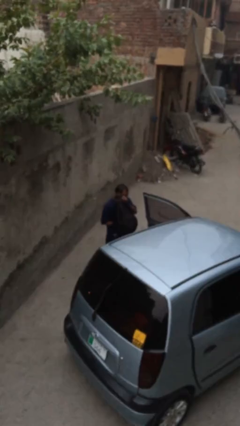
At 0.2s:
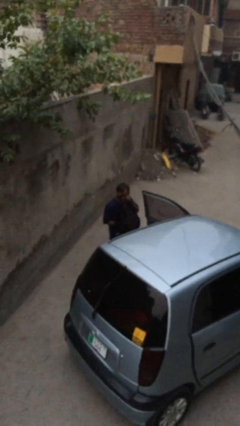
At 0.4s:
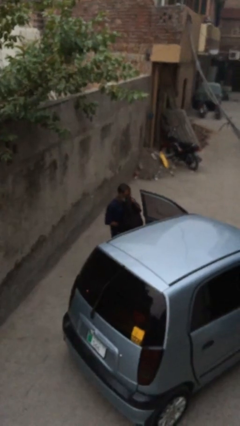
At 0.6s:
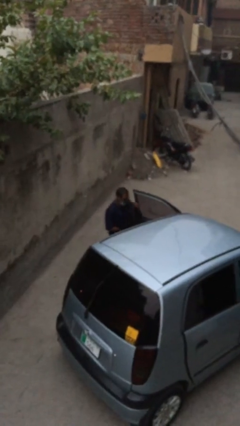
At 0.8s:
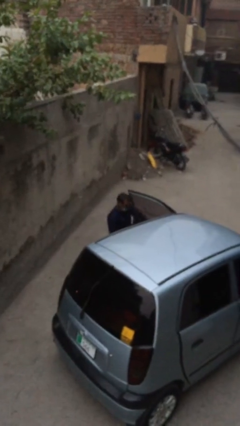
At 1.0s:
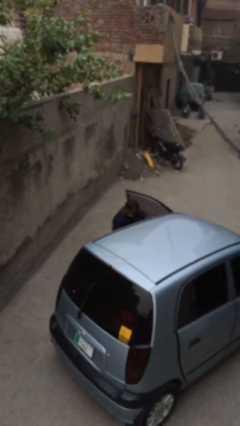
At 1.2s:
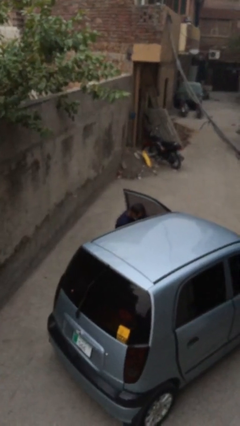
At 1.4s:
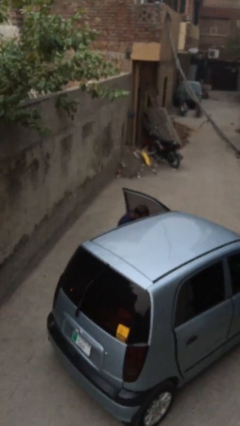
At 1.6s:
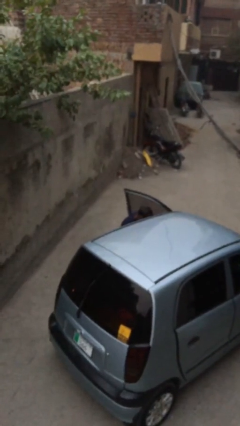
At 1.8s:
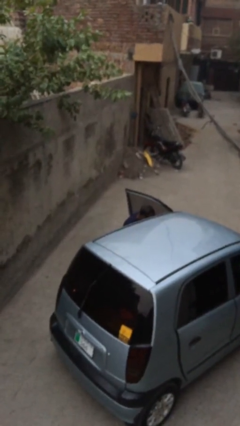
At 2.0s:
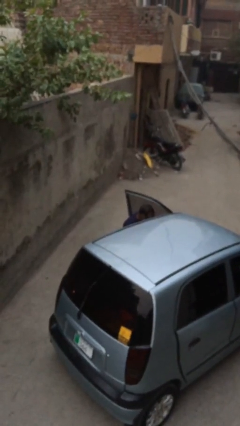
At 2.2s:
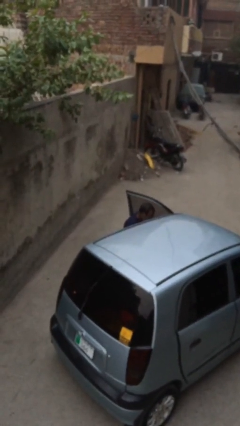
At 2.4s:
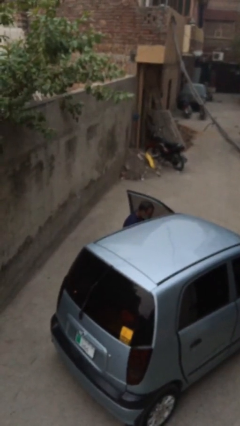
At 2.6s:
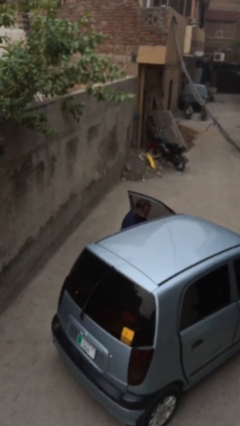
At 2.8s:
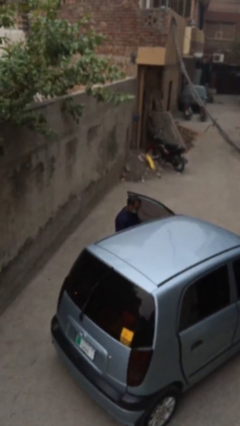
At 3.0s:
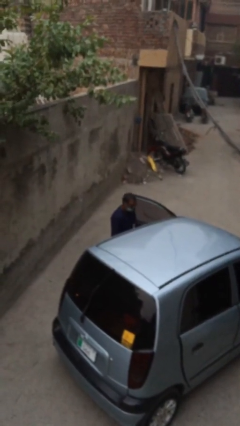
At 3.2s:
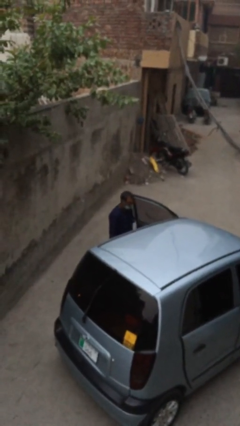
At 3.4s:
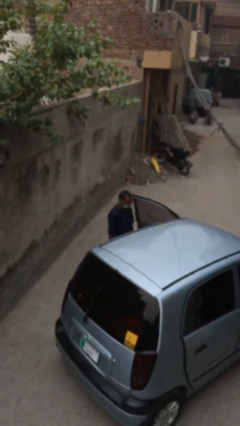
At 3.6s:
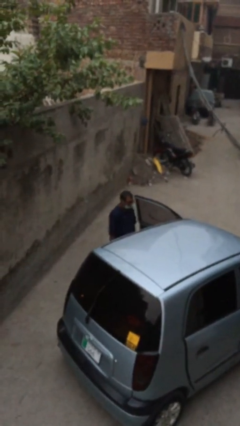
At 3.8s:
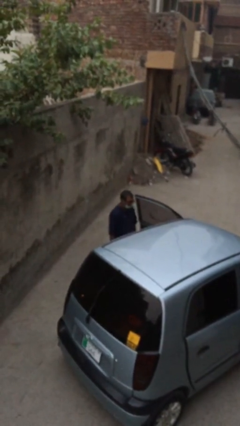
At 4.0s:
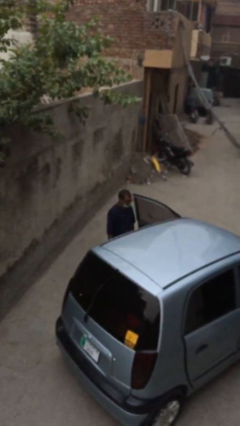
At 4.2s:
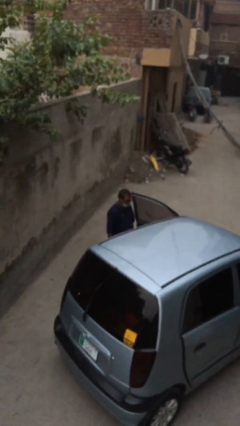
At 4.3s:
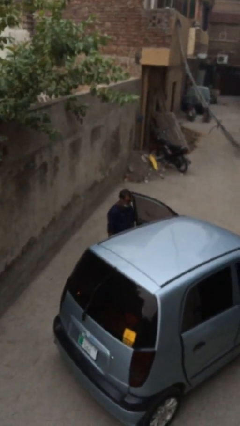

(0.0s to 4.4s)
person loads car

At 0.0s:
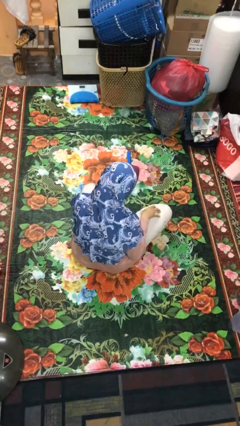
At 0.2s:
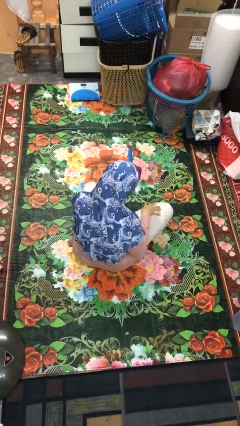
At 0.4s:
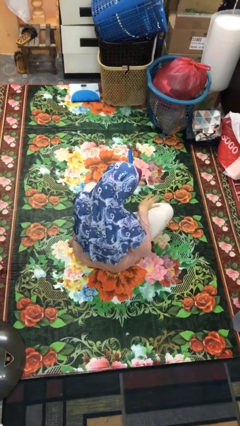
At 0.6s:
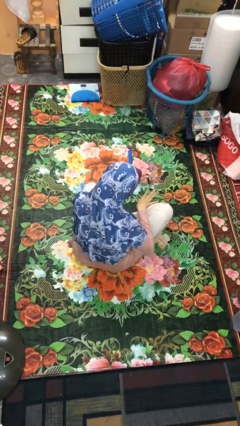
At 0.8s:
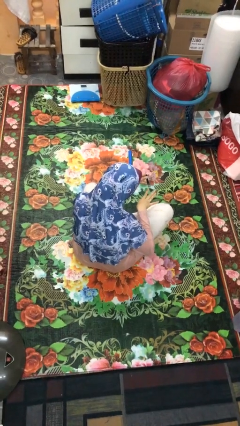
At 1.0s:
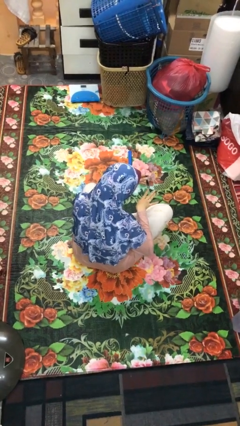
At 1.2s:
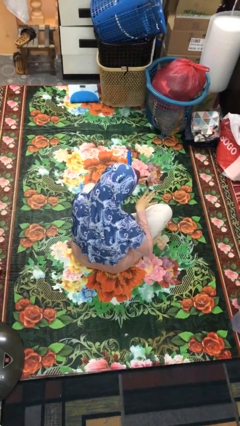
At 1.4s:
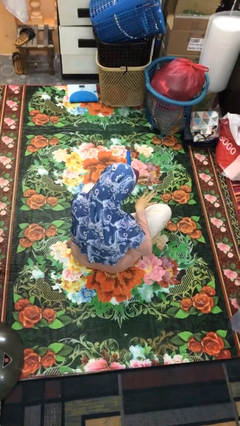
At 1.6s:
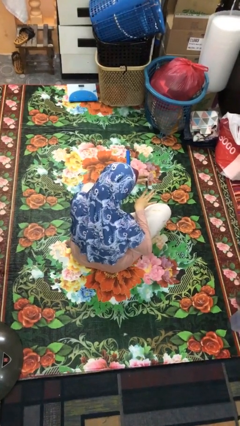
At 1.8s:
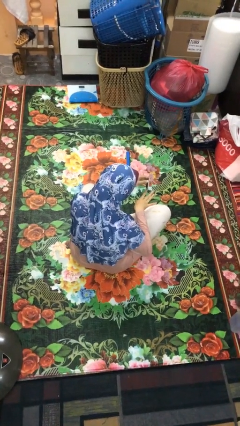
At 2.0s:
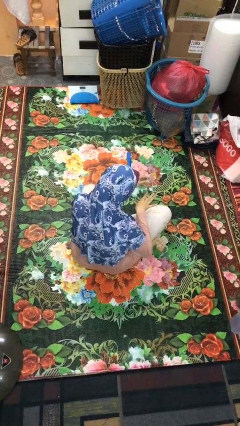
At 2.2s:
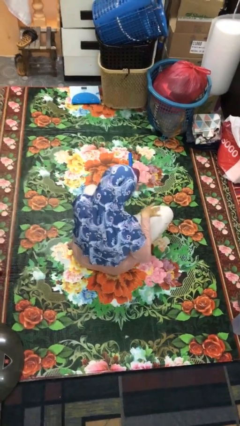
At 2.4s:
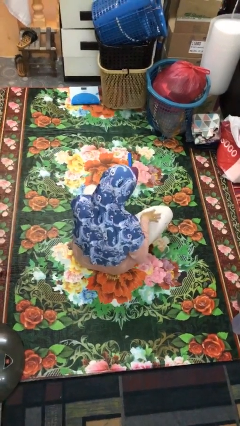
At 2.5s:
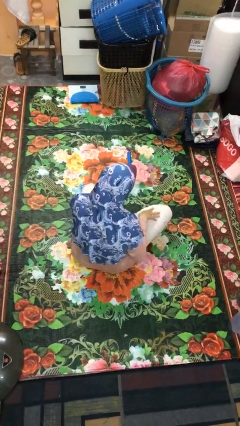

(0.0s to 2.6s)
person clips fingernails

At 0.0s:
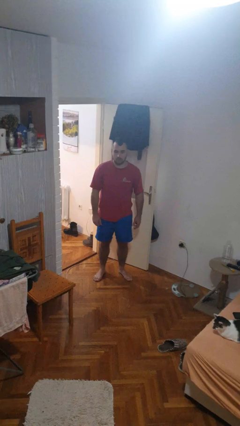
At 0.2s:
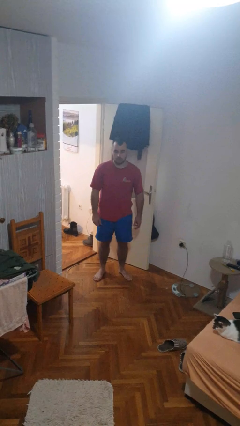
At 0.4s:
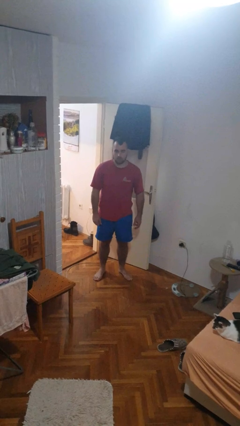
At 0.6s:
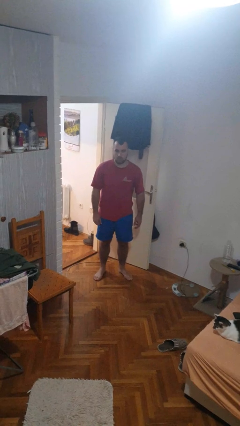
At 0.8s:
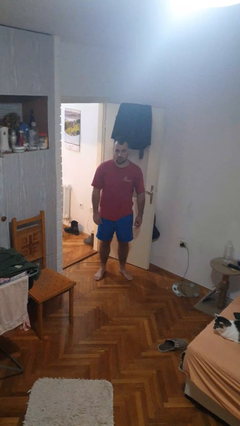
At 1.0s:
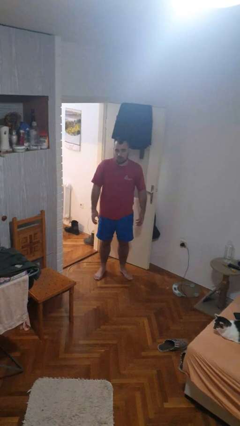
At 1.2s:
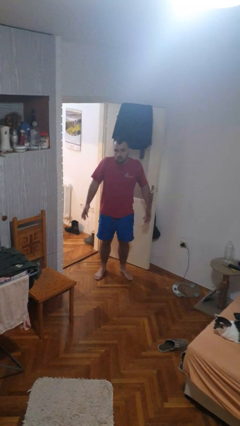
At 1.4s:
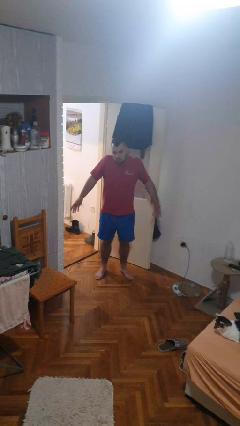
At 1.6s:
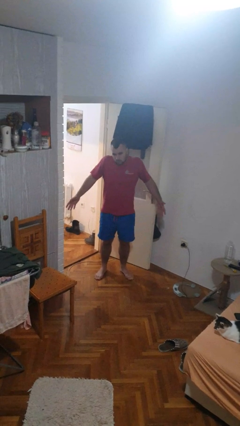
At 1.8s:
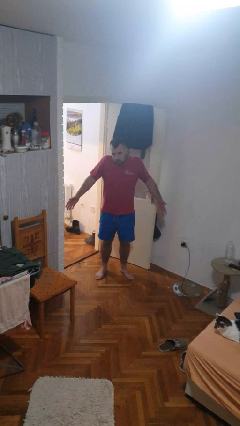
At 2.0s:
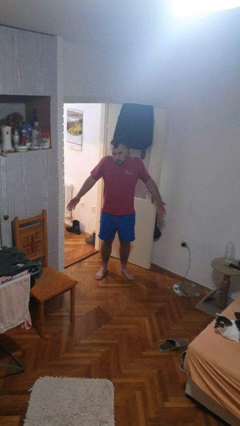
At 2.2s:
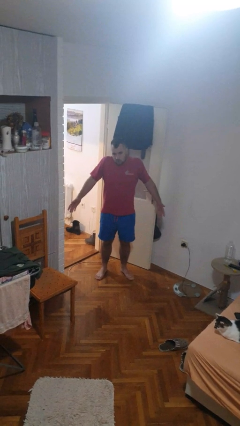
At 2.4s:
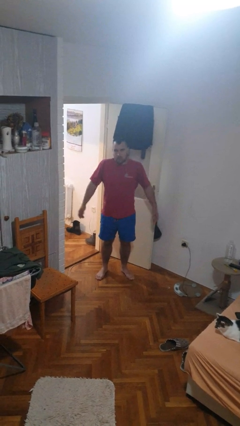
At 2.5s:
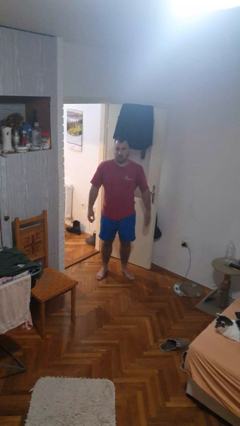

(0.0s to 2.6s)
person shrugs

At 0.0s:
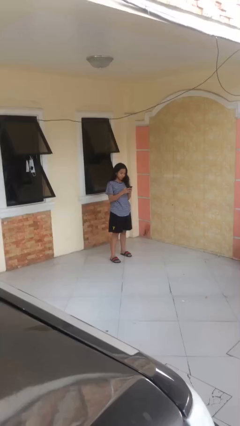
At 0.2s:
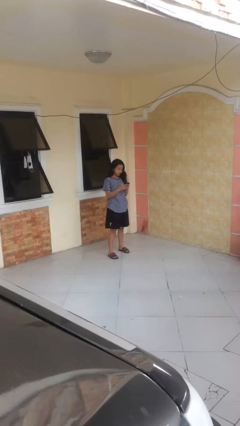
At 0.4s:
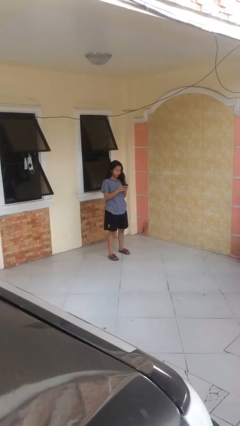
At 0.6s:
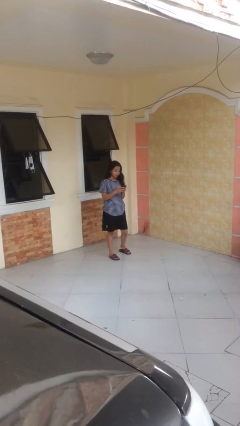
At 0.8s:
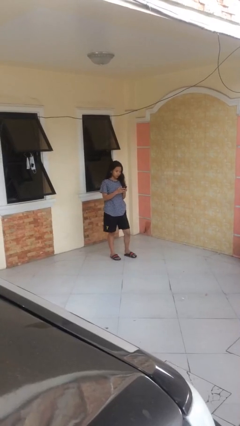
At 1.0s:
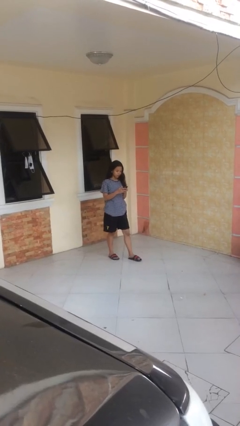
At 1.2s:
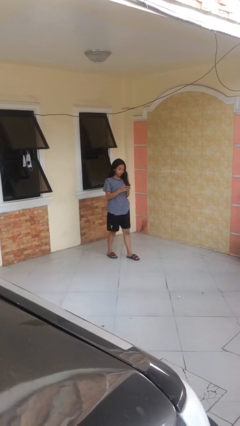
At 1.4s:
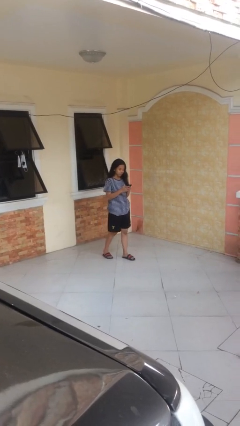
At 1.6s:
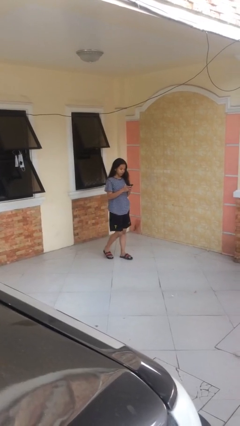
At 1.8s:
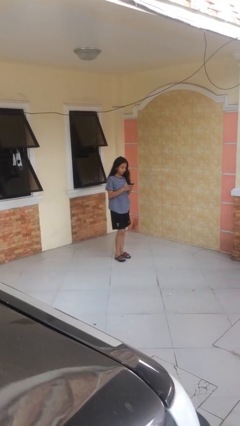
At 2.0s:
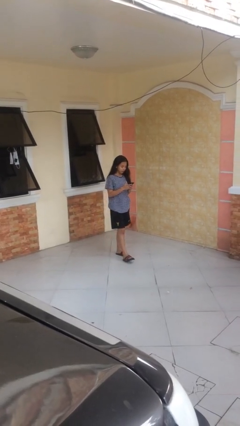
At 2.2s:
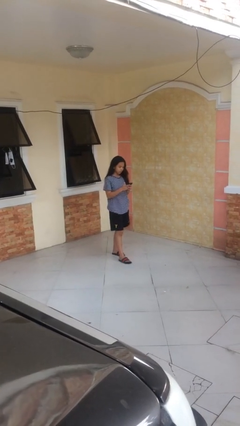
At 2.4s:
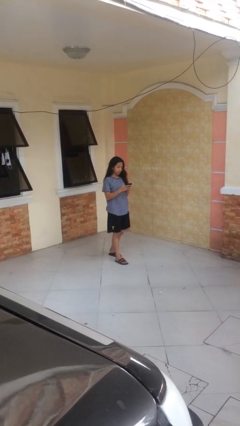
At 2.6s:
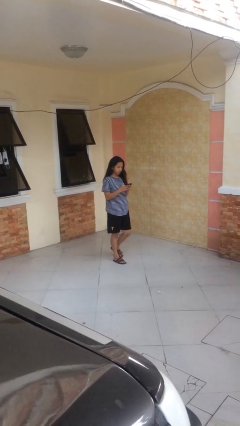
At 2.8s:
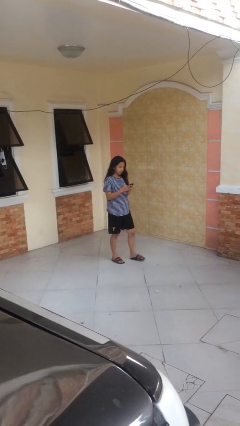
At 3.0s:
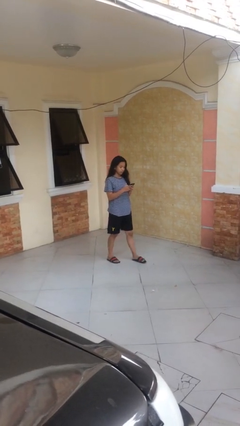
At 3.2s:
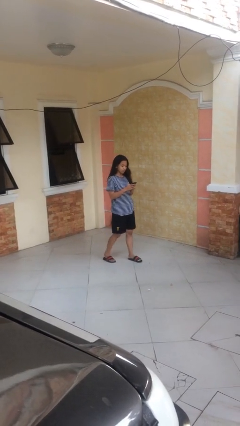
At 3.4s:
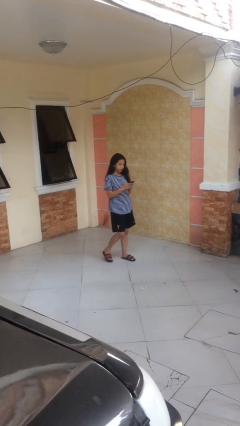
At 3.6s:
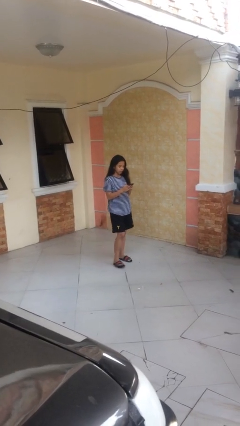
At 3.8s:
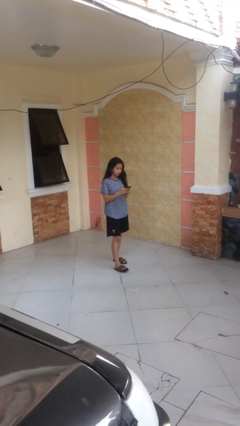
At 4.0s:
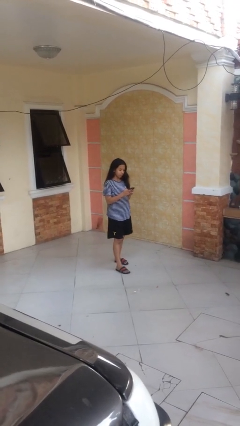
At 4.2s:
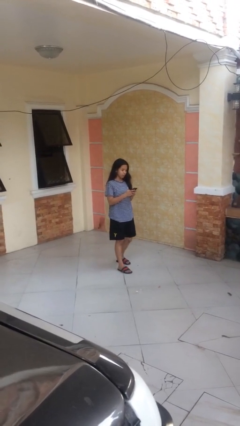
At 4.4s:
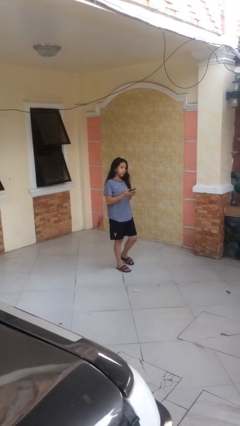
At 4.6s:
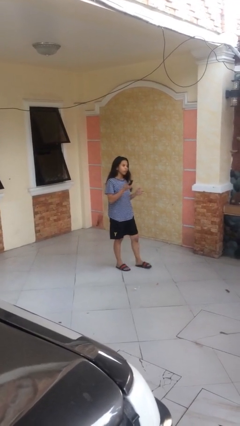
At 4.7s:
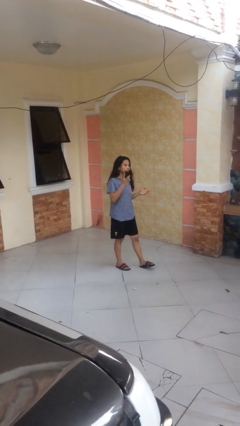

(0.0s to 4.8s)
person texts on phone

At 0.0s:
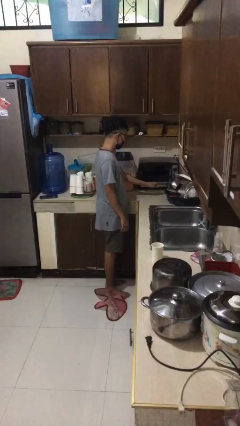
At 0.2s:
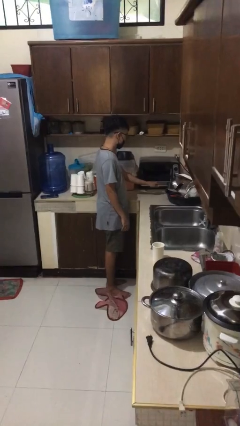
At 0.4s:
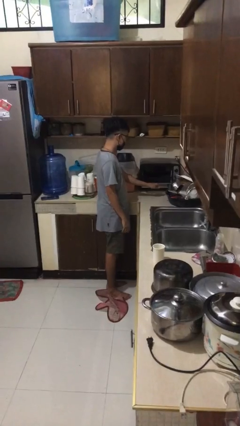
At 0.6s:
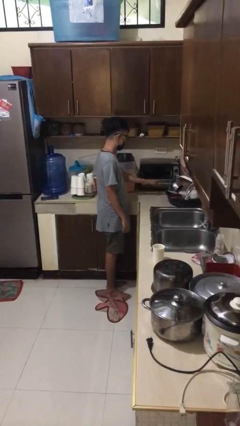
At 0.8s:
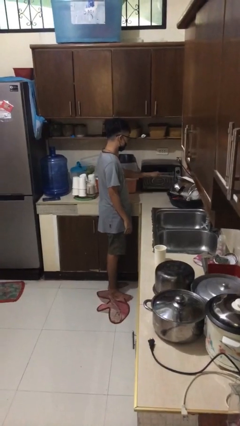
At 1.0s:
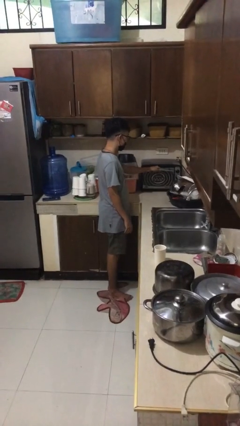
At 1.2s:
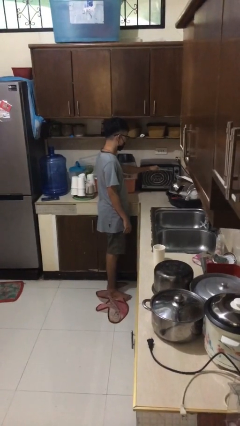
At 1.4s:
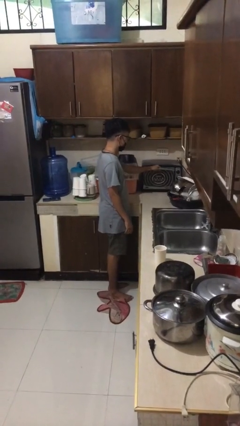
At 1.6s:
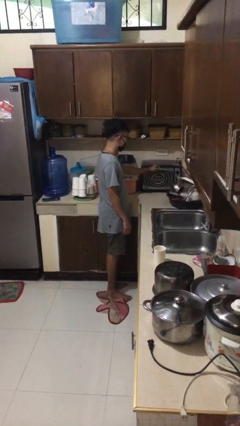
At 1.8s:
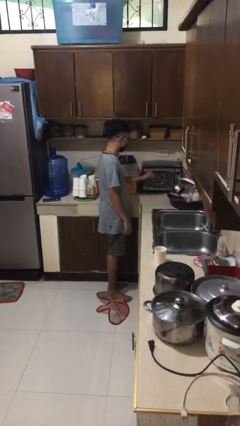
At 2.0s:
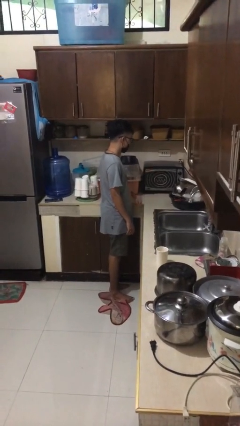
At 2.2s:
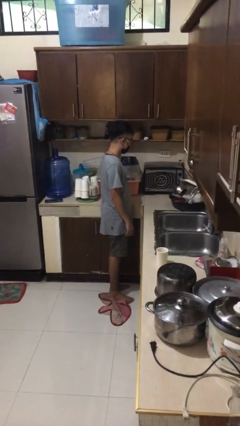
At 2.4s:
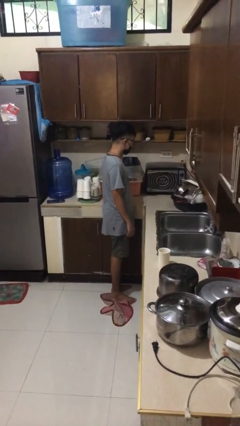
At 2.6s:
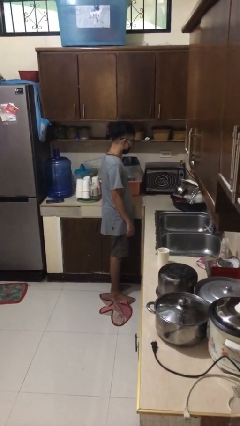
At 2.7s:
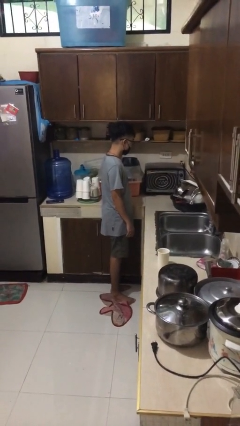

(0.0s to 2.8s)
person closes microwave

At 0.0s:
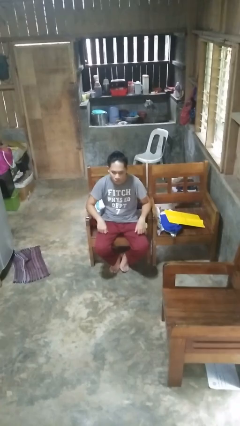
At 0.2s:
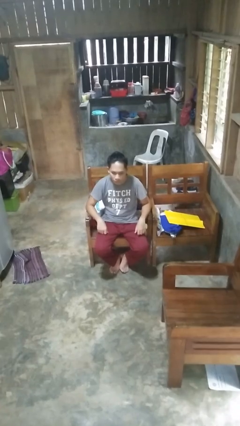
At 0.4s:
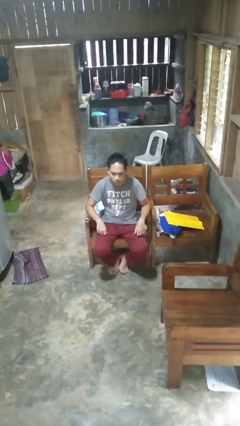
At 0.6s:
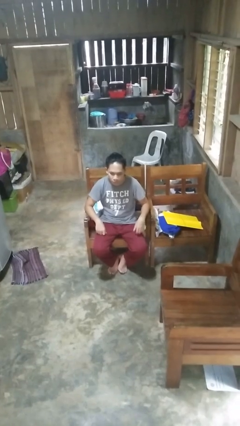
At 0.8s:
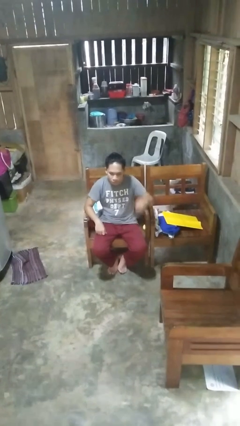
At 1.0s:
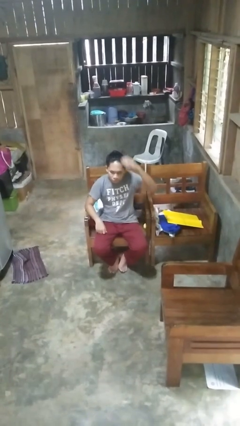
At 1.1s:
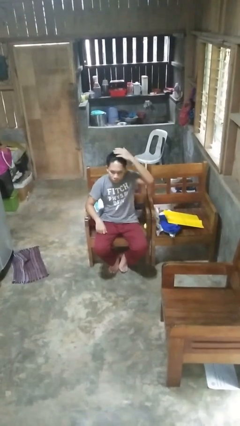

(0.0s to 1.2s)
person pats head
